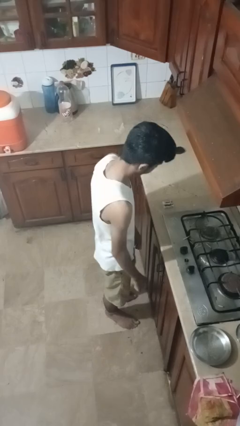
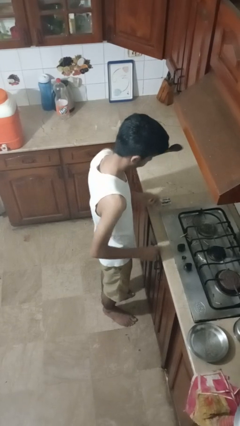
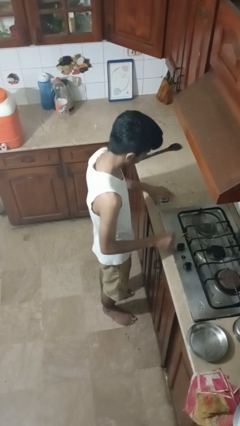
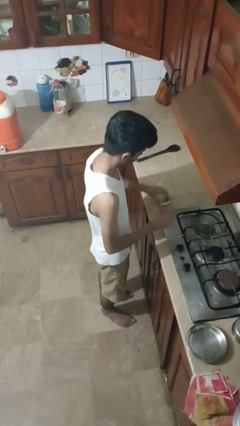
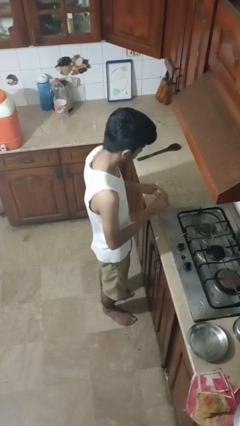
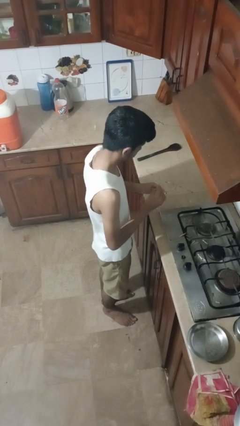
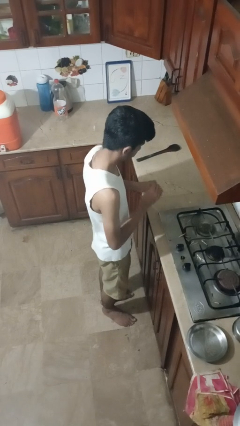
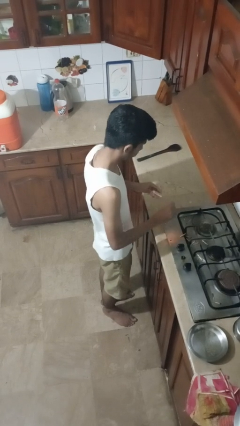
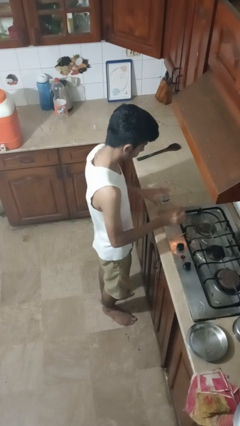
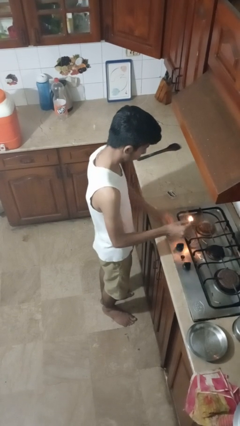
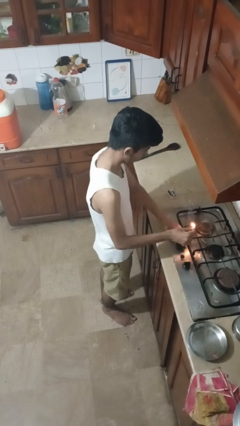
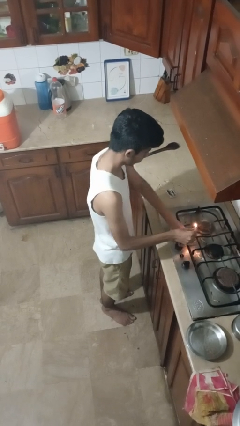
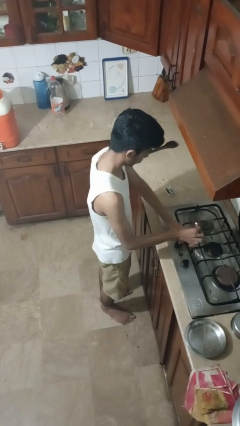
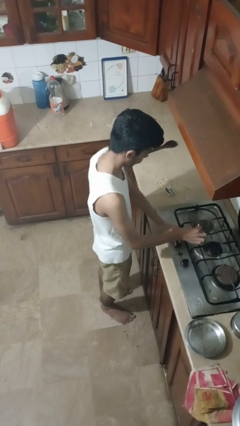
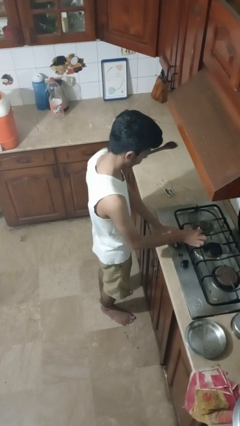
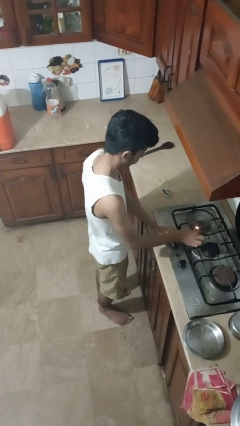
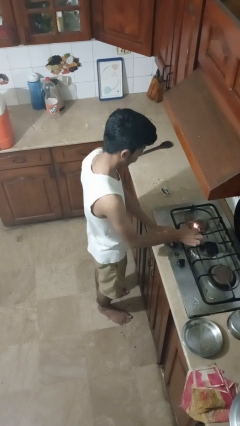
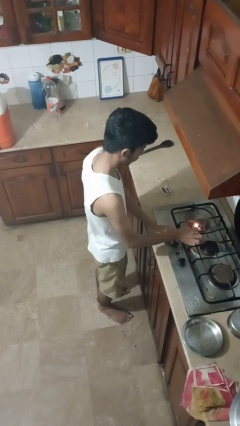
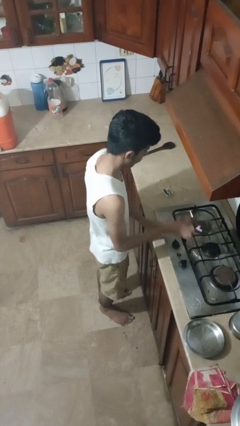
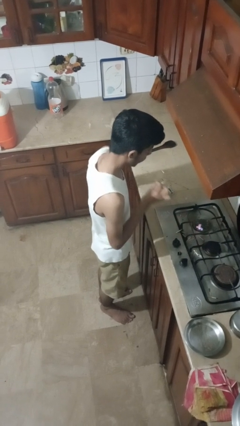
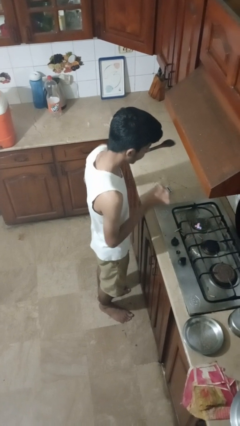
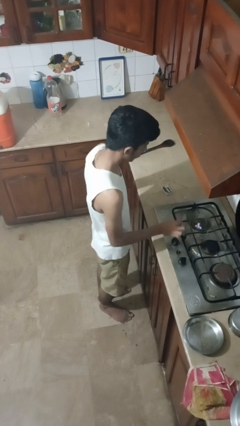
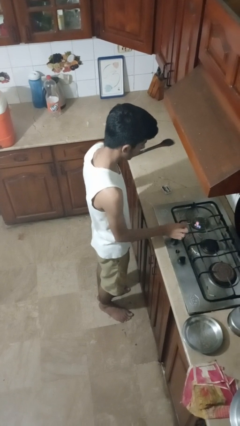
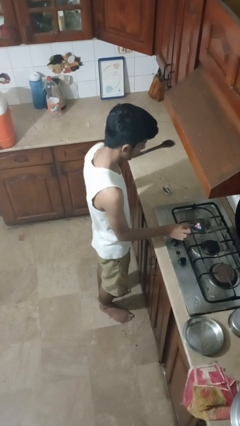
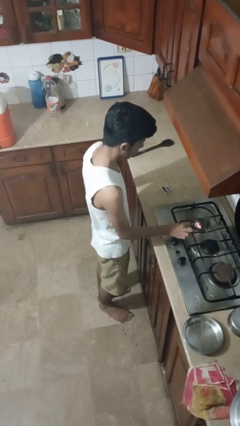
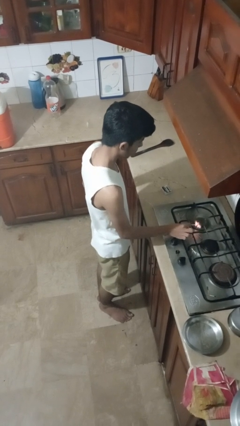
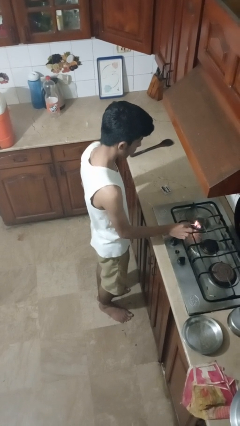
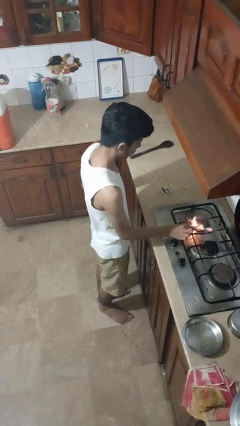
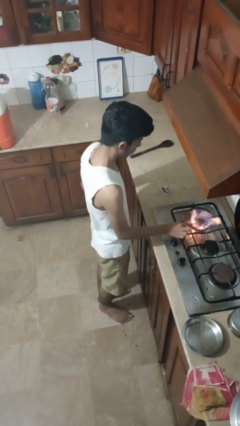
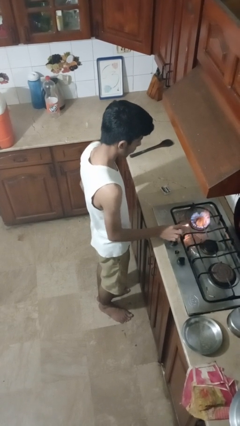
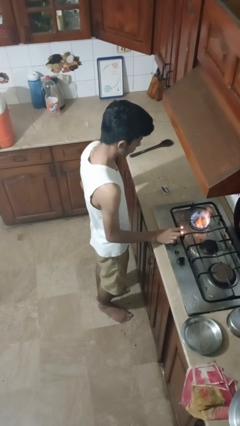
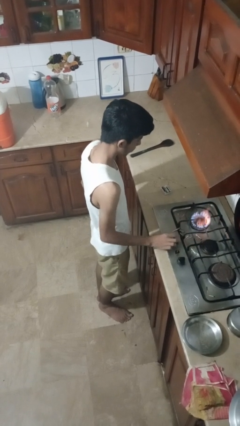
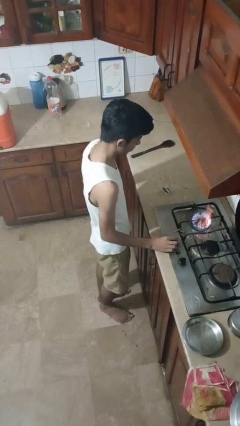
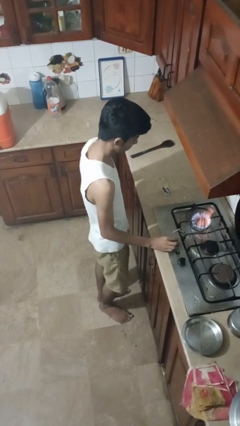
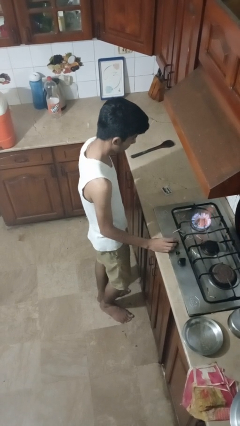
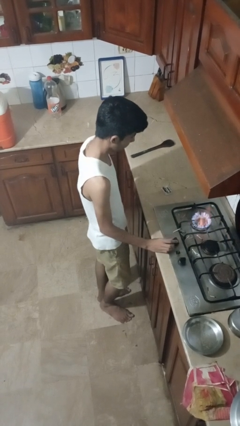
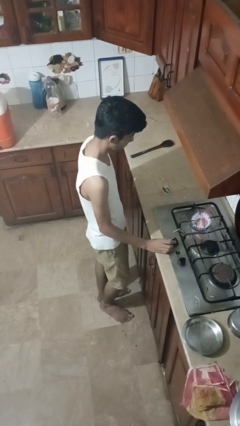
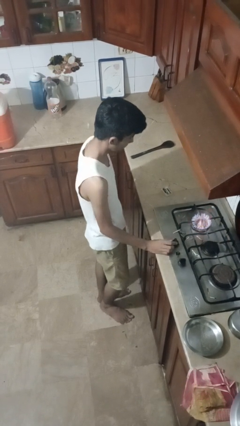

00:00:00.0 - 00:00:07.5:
person turns on stovetop

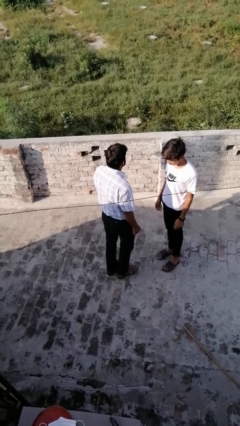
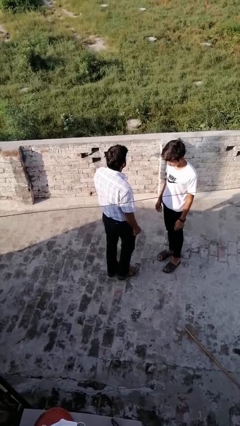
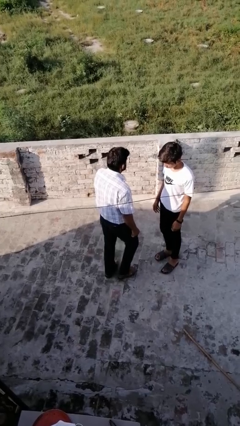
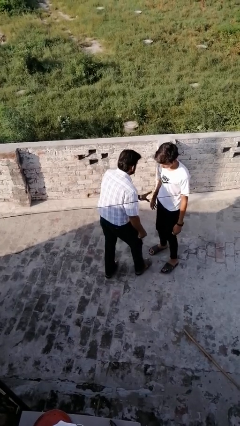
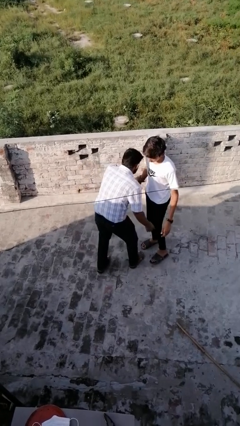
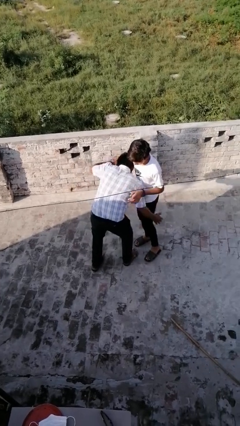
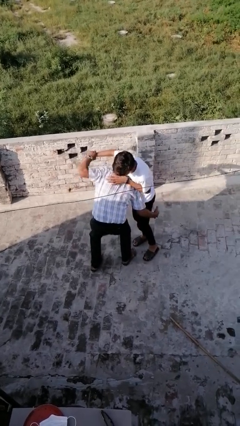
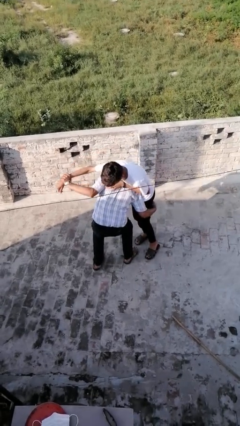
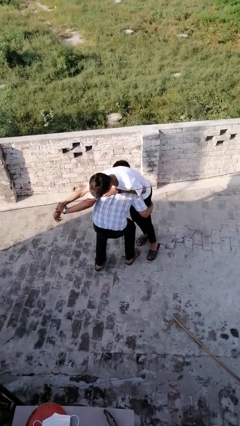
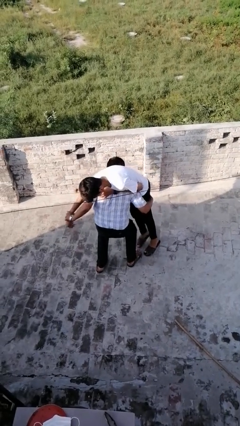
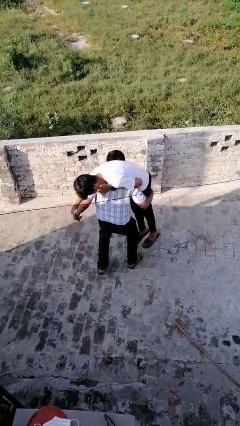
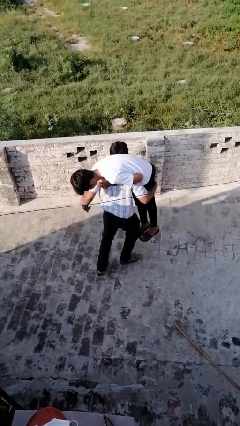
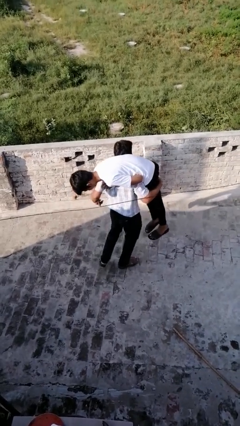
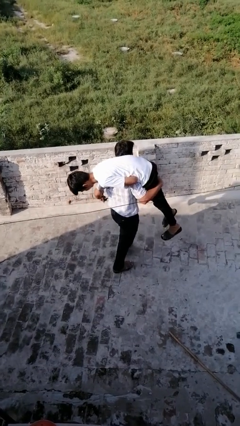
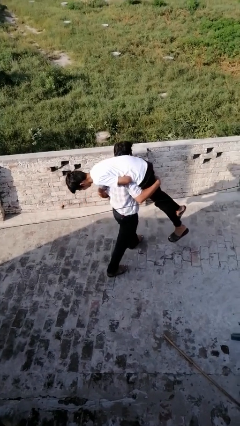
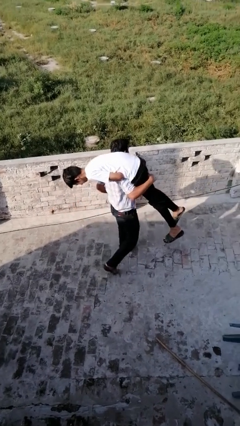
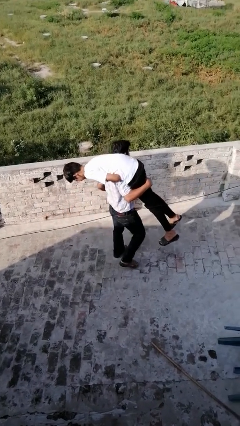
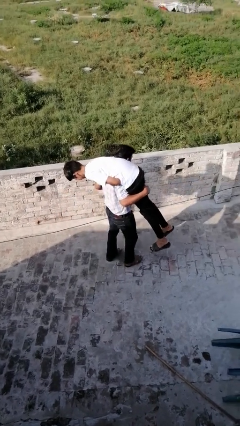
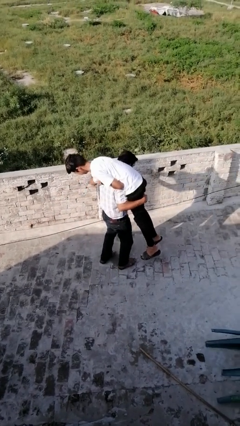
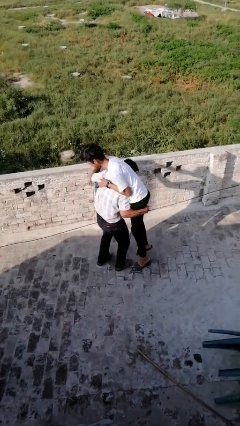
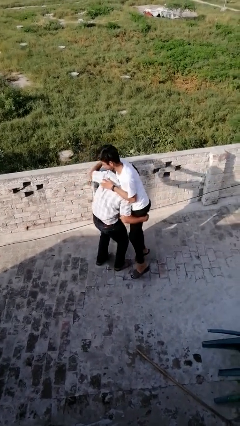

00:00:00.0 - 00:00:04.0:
person carries person on shoulders

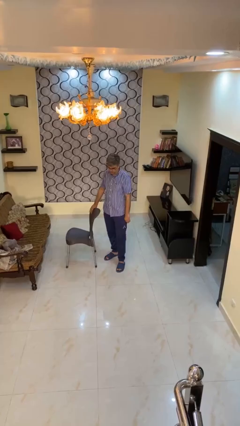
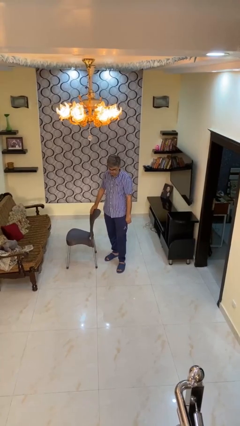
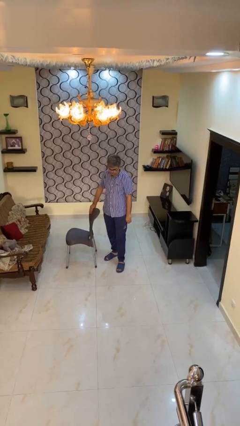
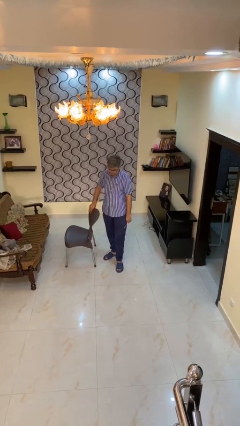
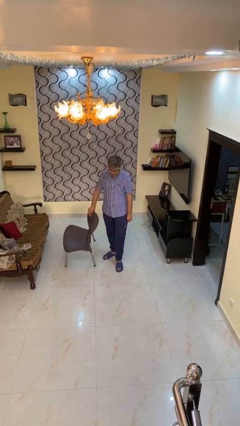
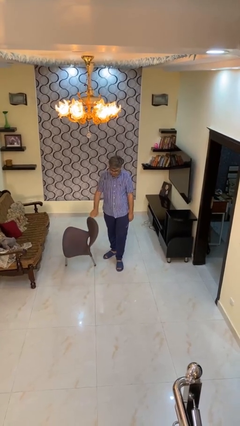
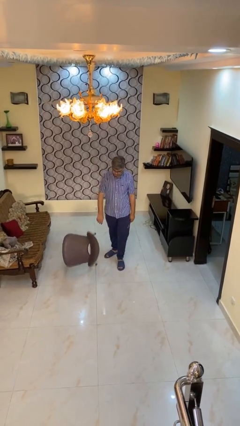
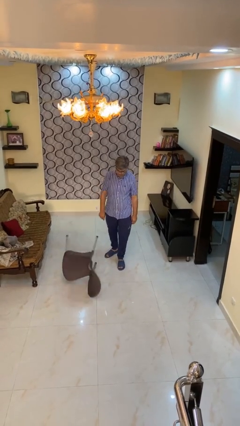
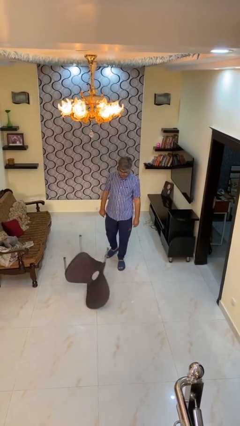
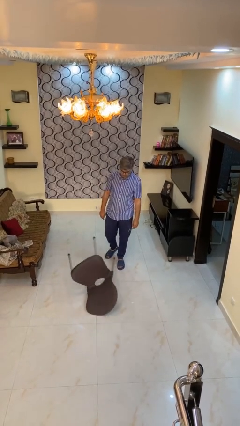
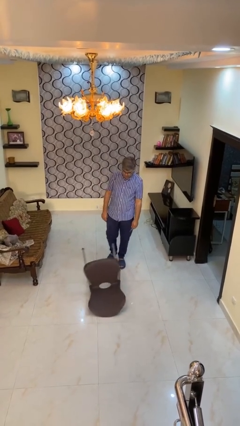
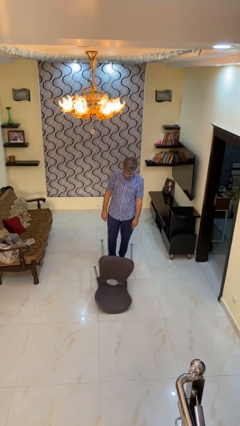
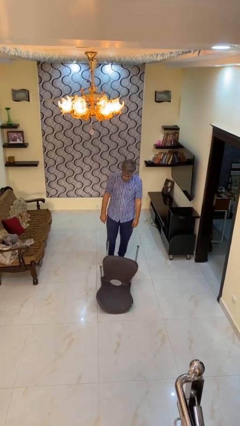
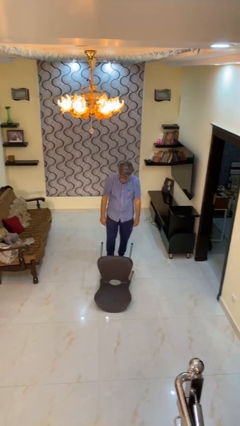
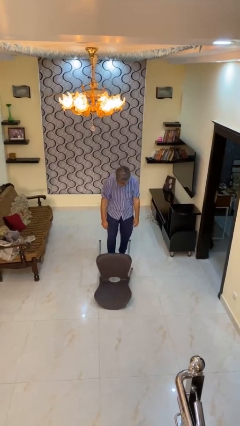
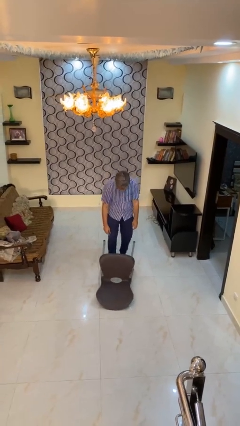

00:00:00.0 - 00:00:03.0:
person knocks over furniture

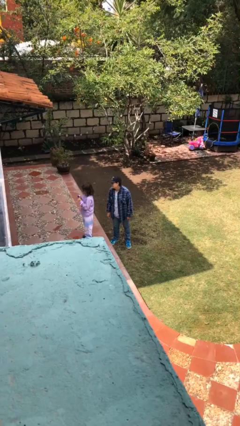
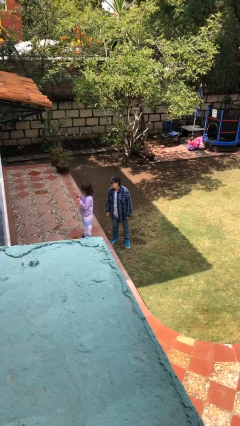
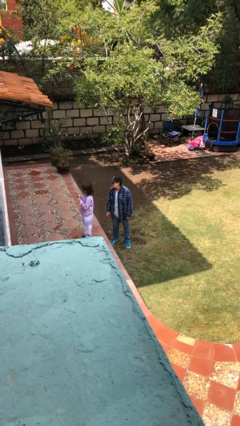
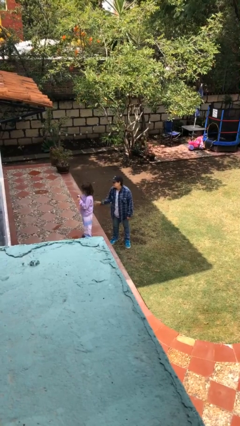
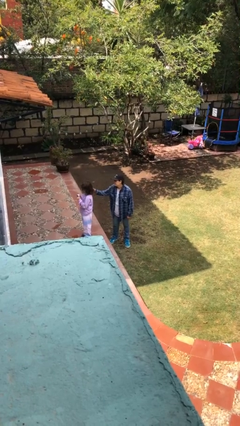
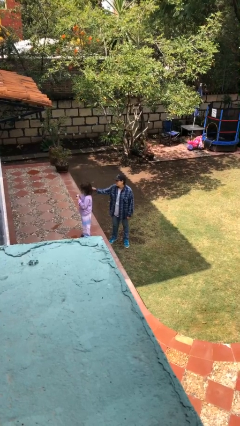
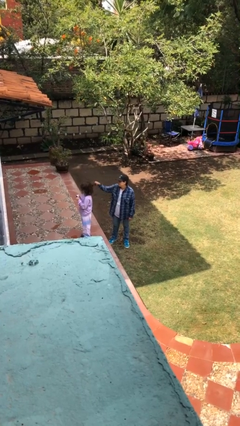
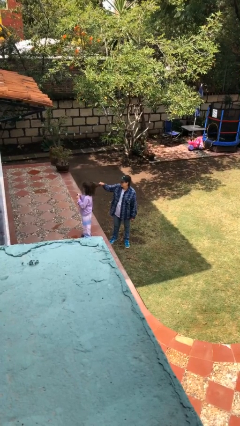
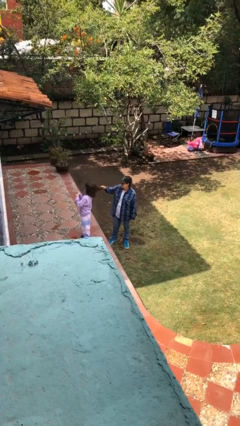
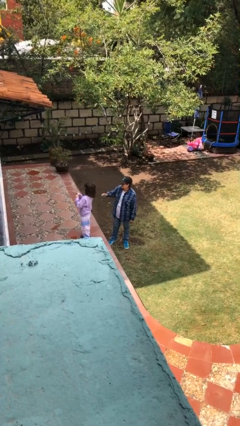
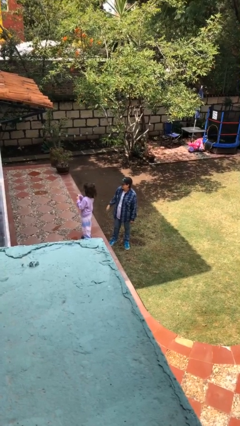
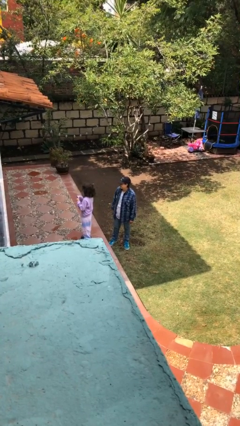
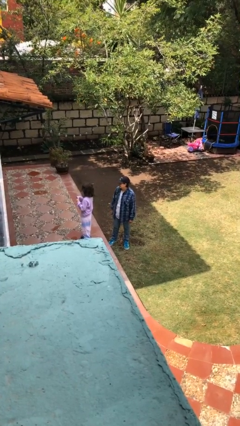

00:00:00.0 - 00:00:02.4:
person grabs person by hair

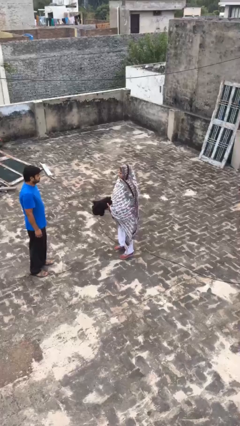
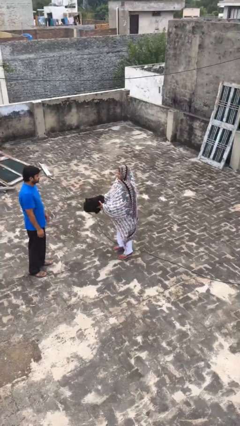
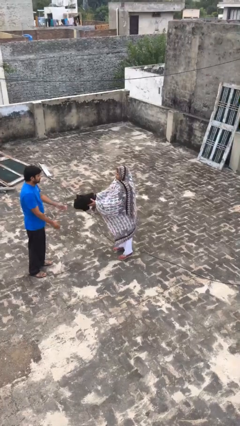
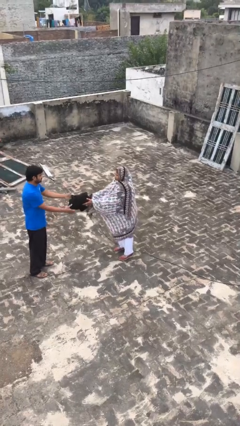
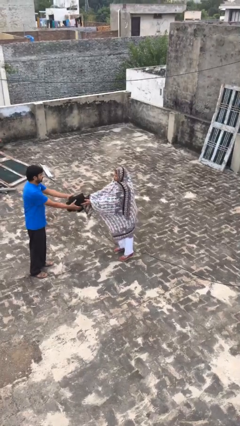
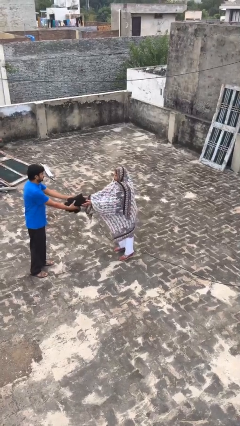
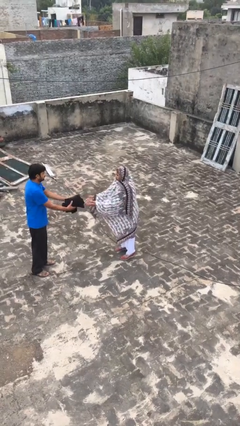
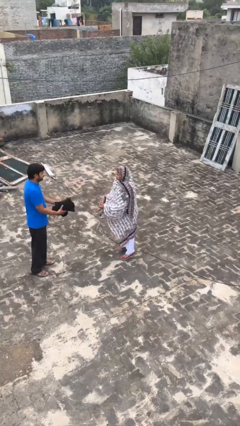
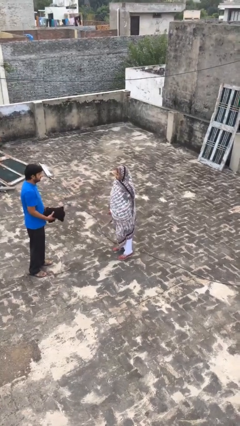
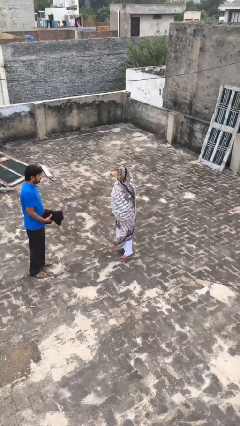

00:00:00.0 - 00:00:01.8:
person transfers object to person
